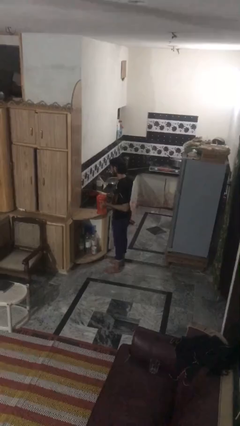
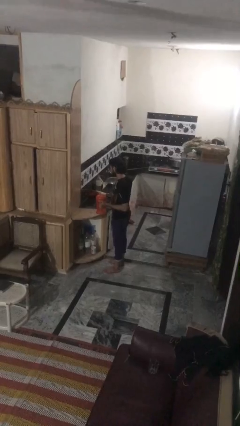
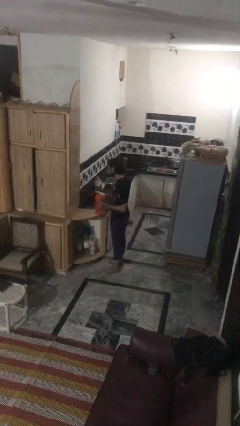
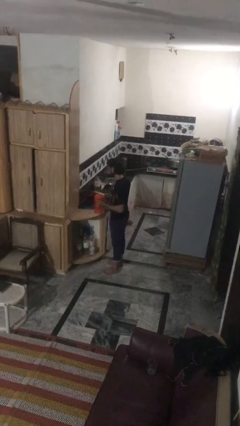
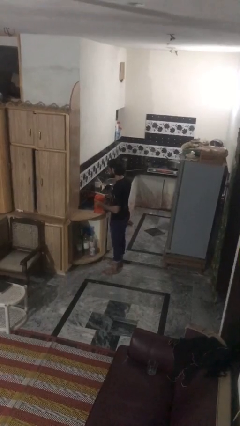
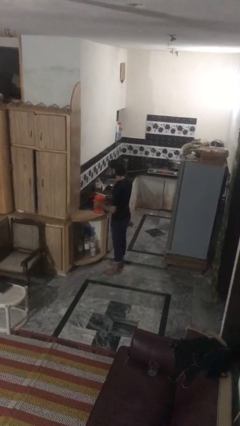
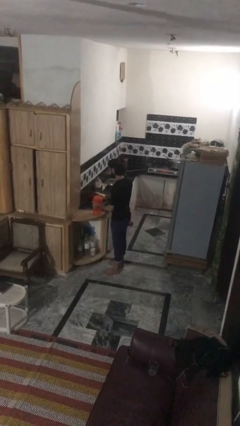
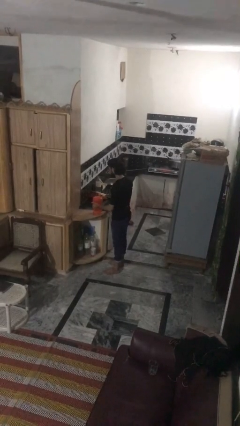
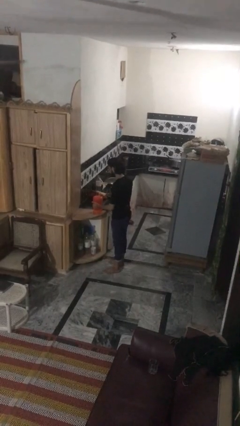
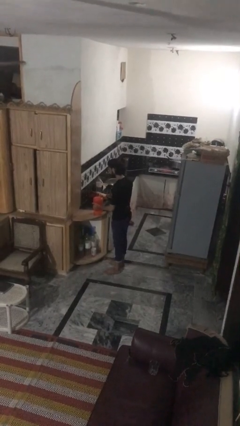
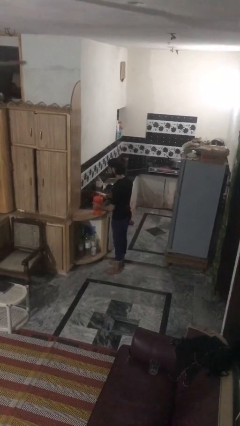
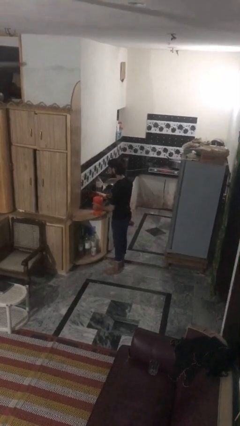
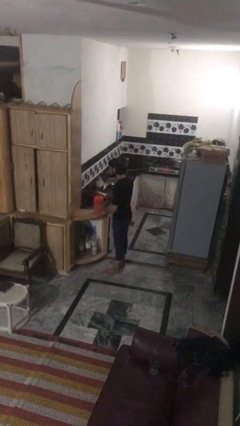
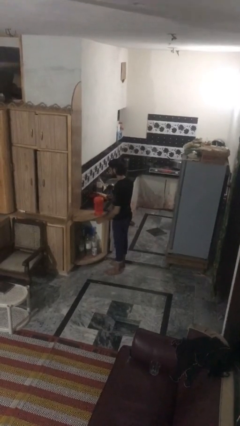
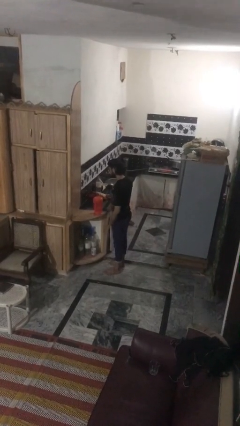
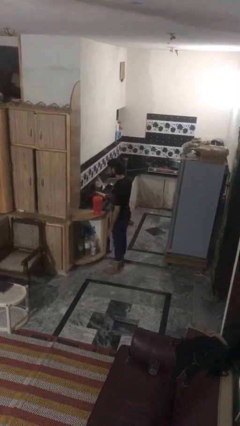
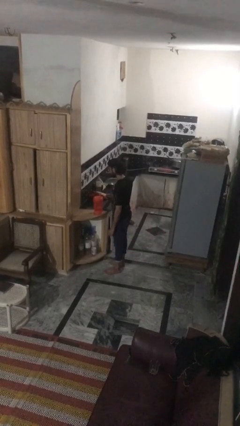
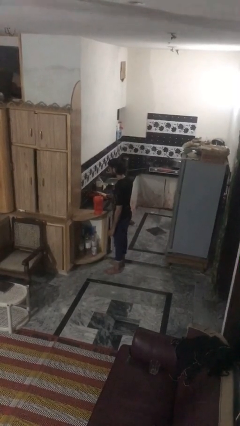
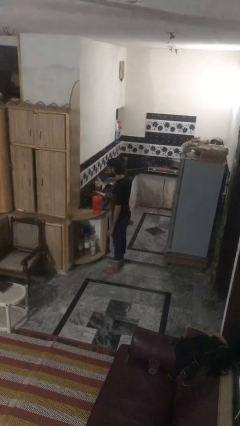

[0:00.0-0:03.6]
person puts down object on countertop

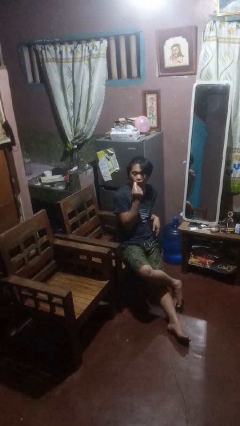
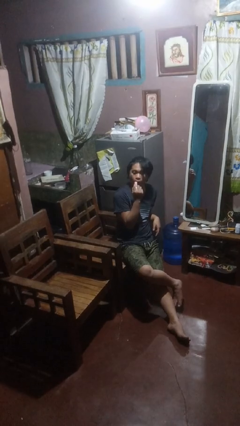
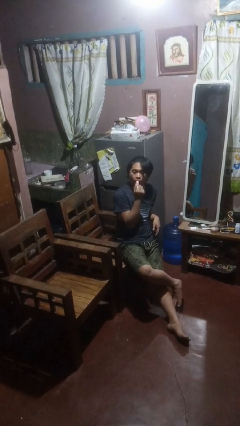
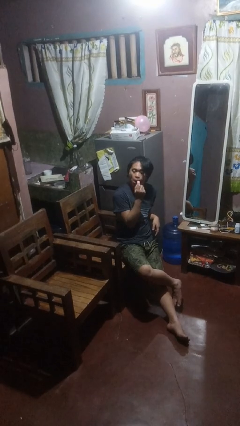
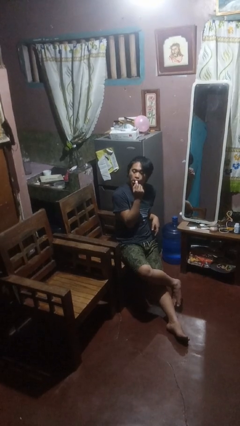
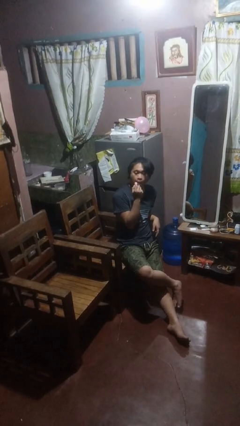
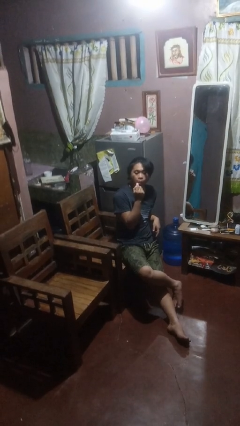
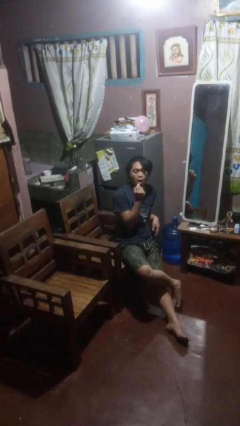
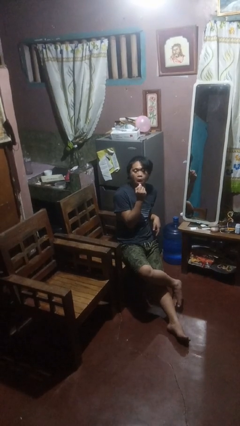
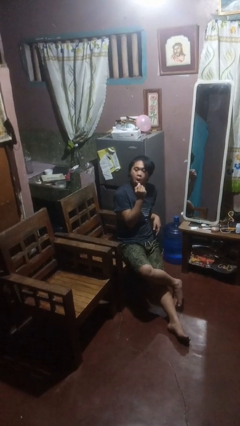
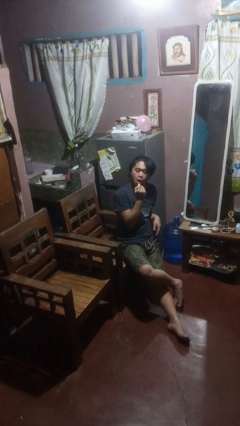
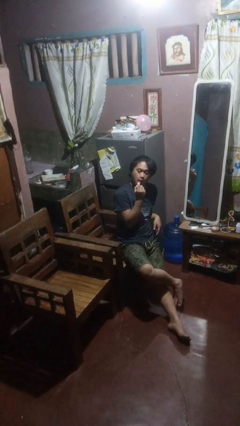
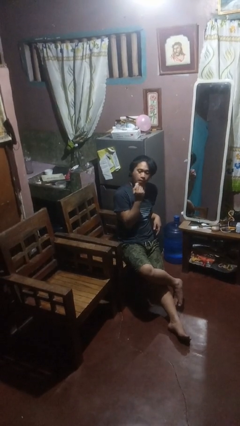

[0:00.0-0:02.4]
person applies lip makeup

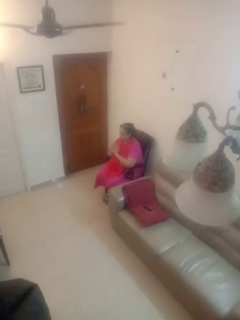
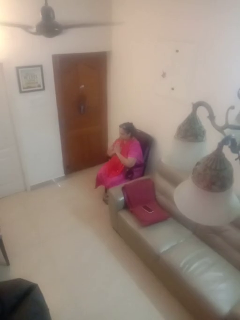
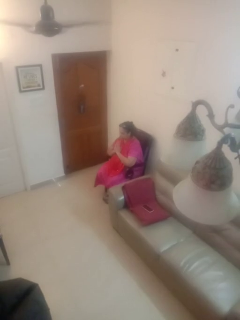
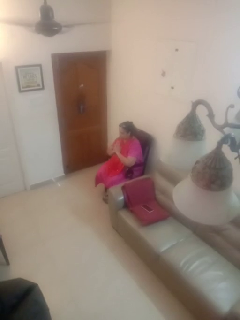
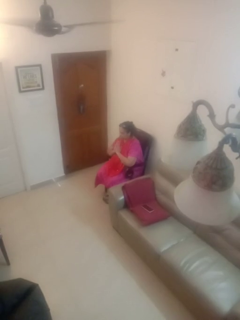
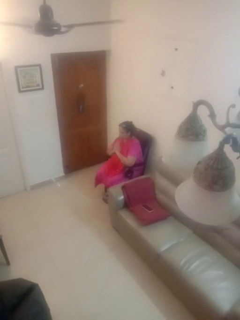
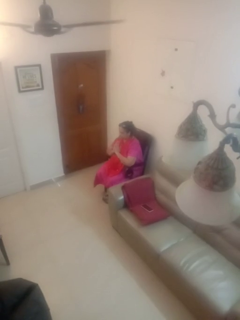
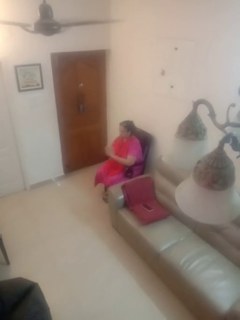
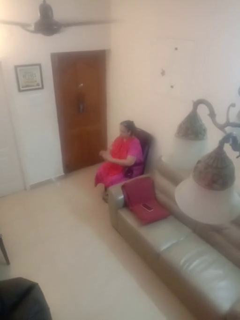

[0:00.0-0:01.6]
person prays

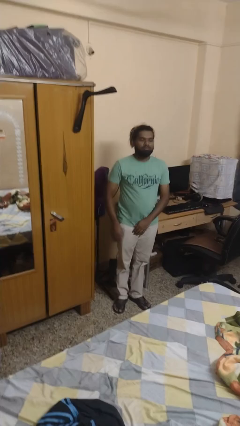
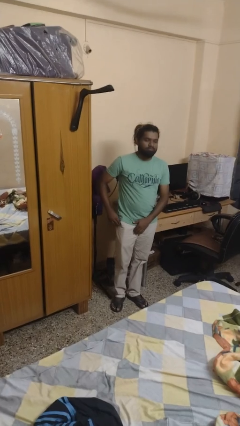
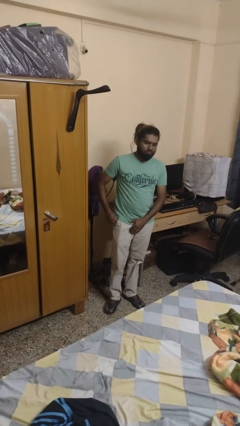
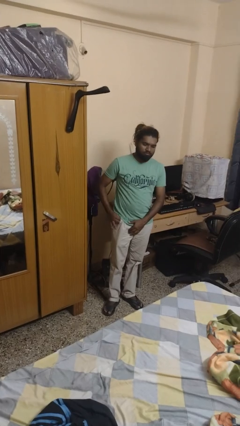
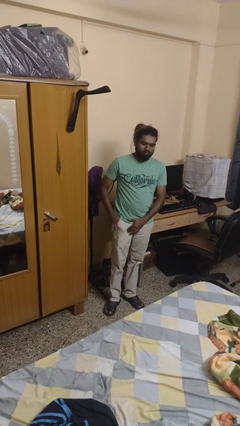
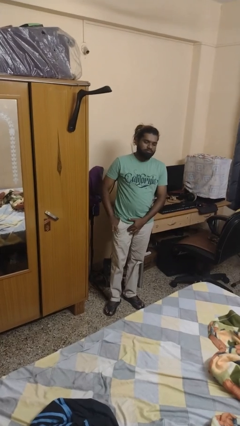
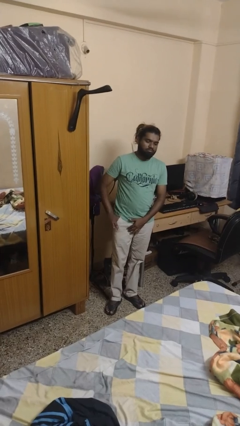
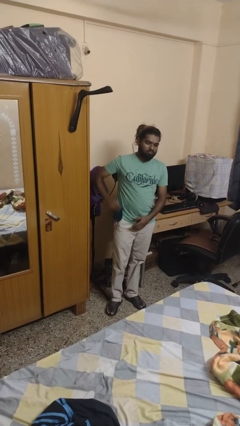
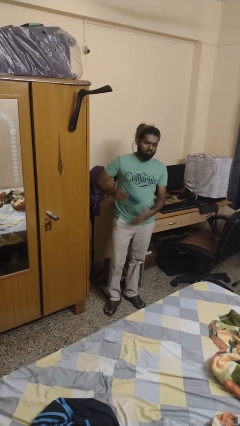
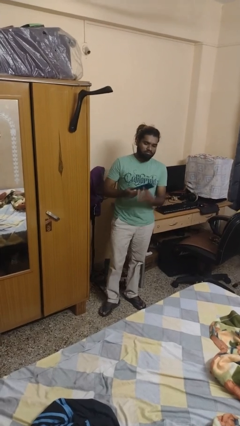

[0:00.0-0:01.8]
person takes phone from pocket

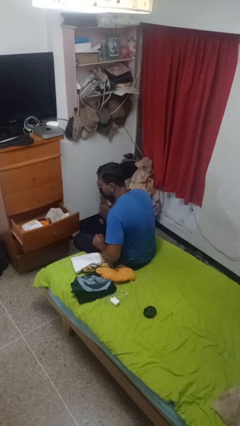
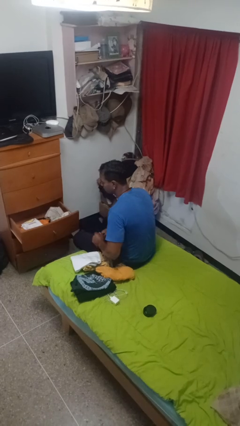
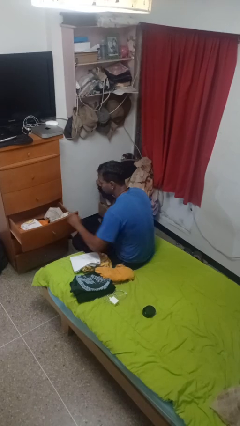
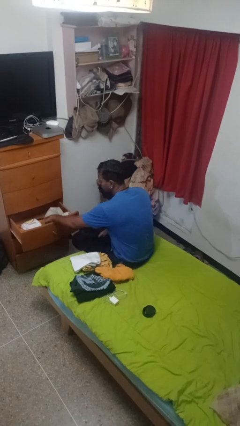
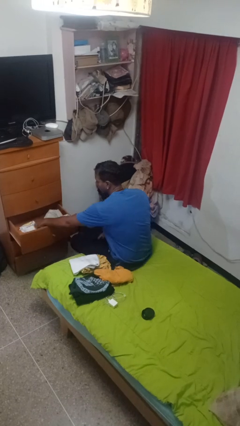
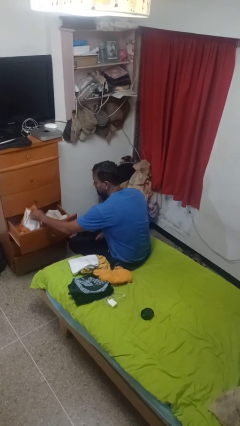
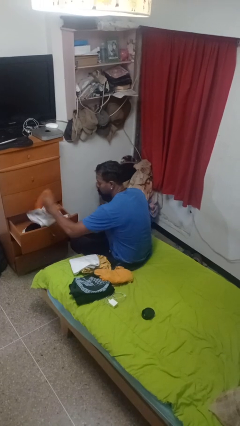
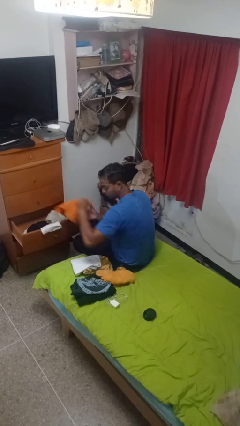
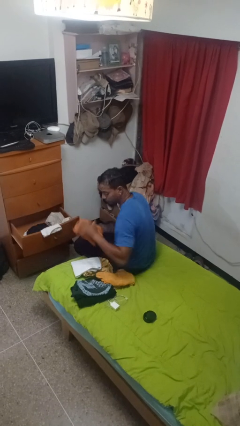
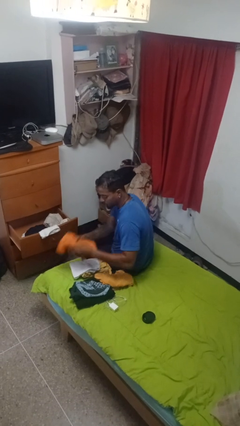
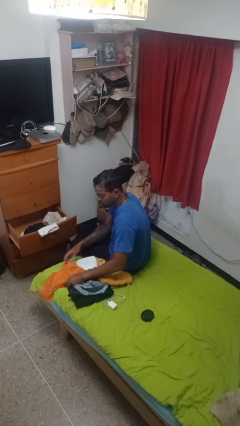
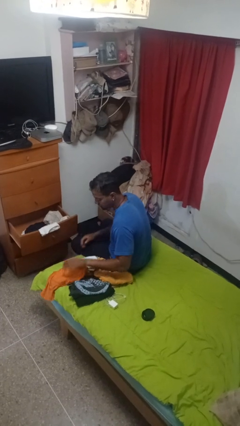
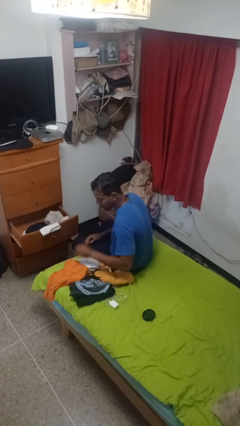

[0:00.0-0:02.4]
person takes clothes from dresser

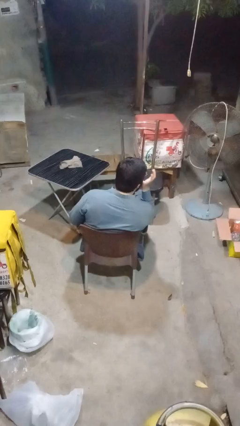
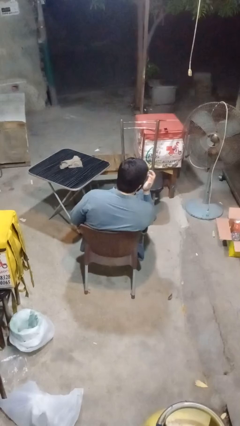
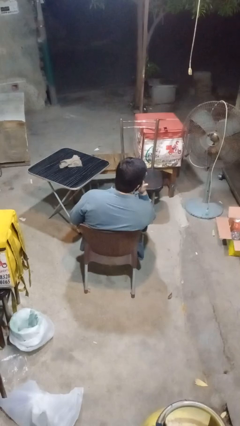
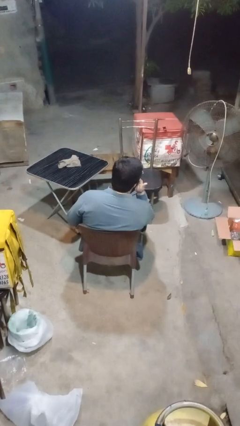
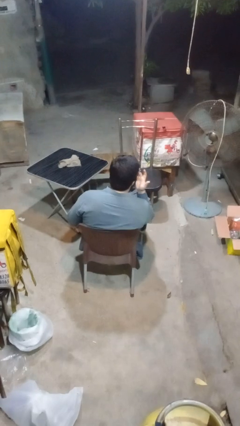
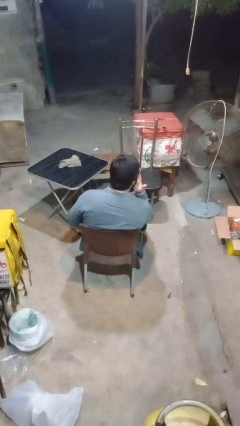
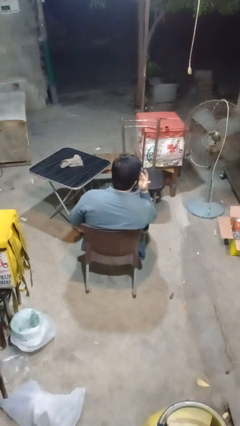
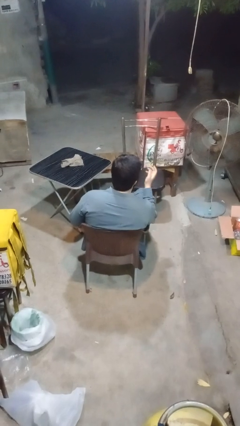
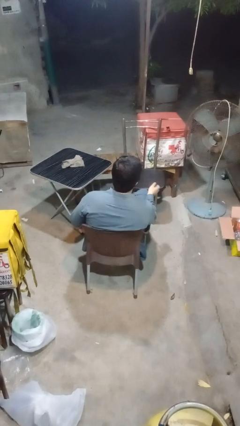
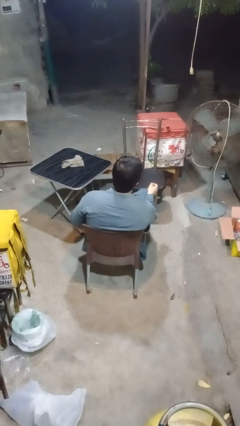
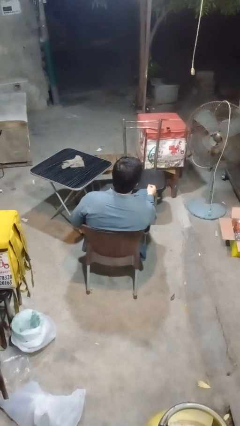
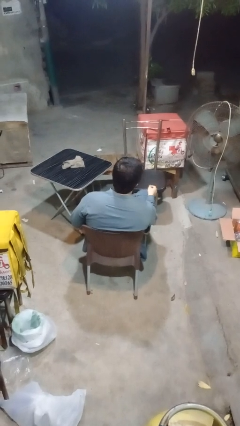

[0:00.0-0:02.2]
person licks fingers

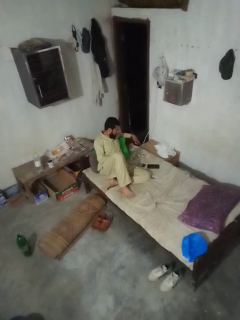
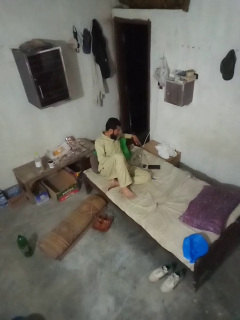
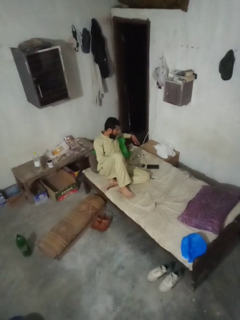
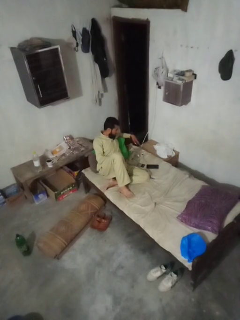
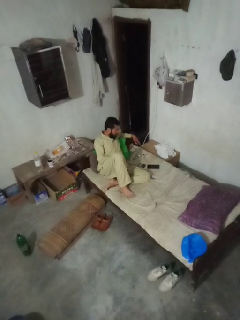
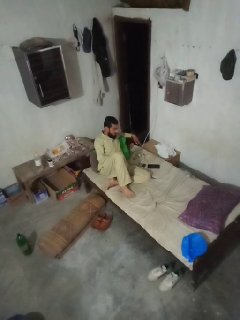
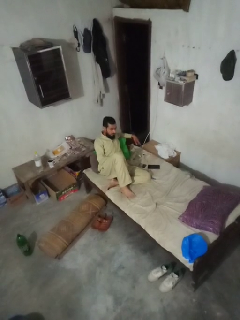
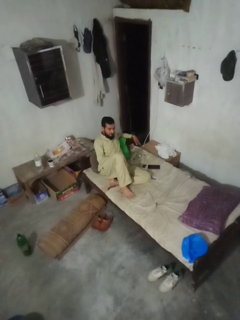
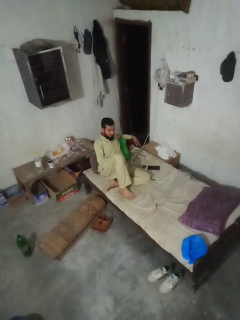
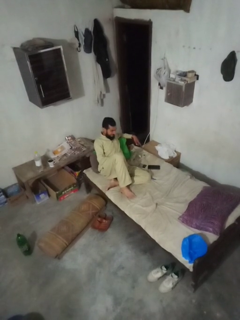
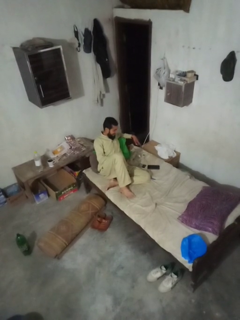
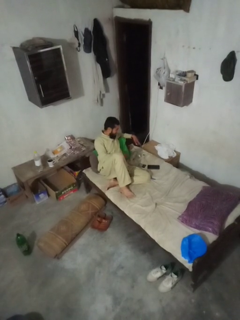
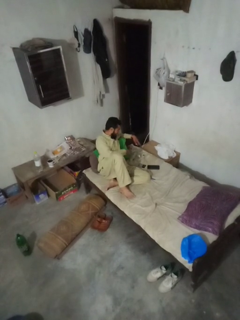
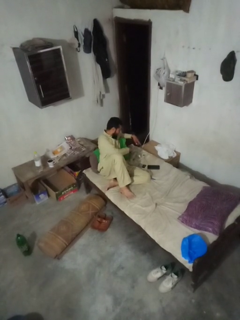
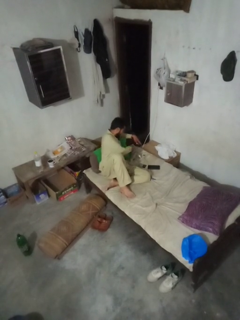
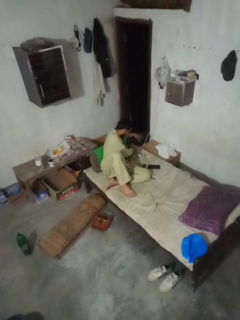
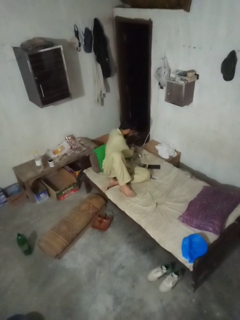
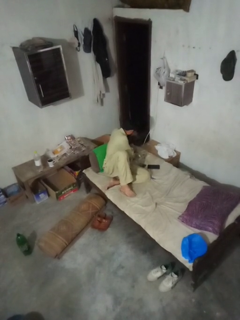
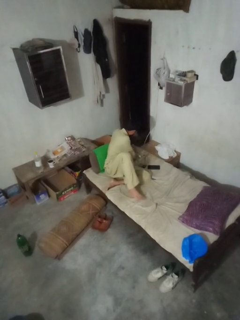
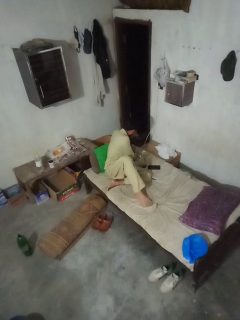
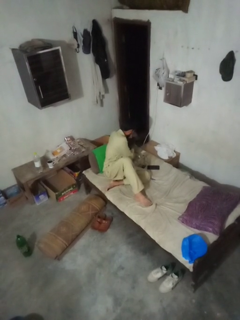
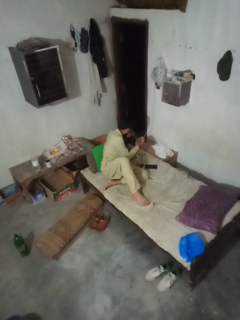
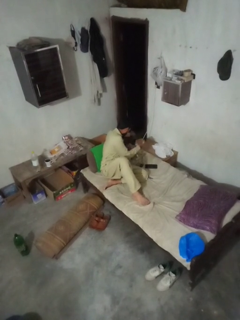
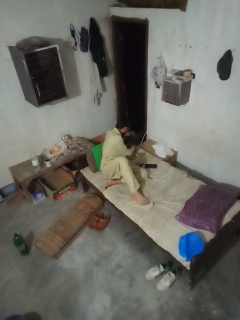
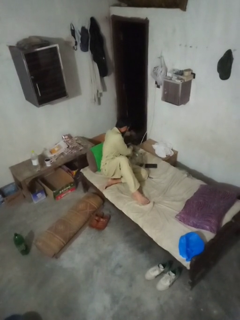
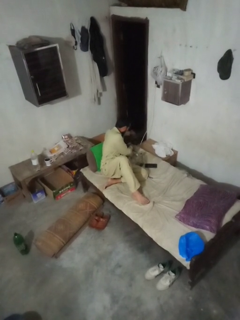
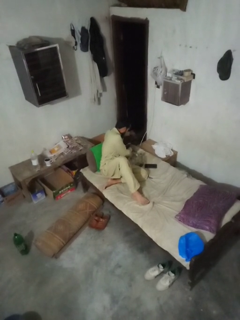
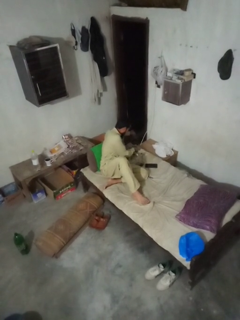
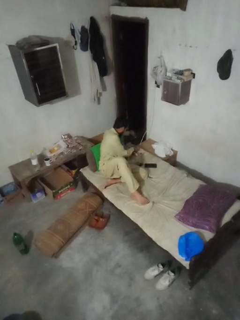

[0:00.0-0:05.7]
person searches under bed
